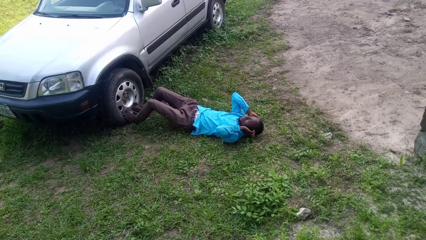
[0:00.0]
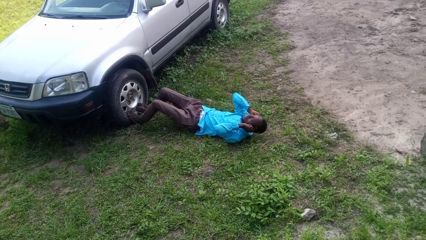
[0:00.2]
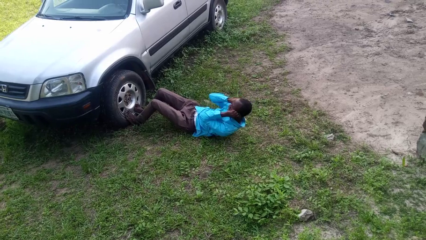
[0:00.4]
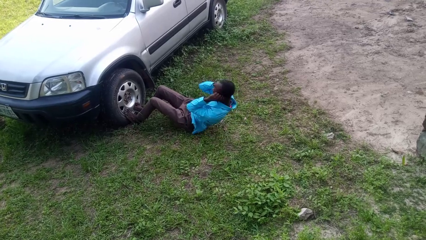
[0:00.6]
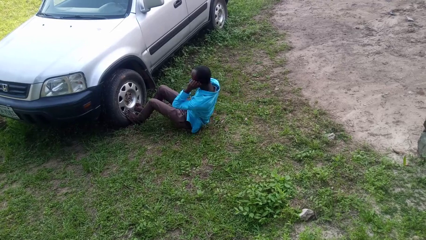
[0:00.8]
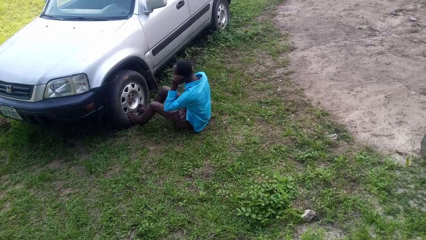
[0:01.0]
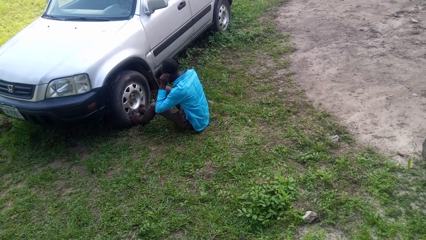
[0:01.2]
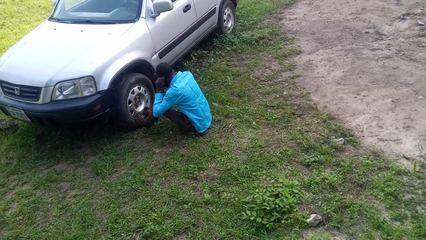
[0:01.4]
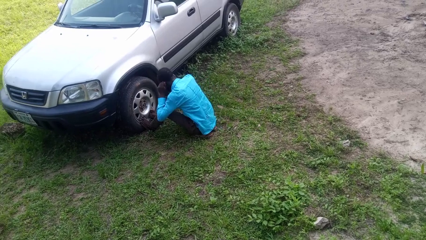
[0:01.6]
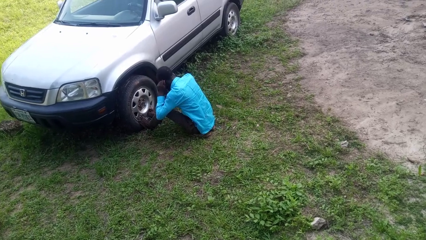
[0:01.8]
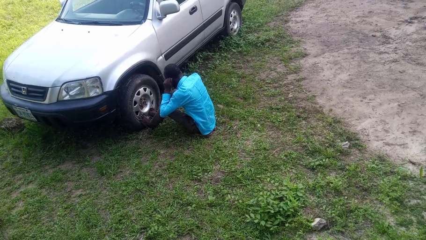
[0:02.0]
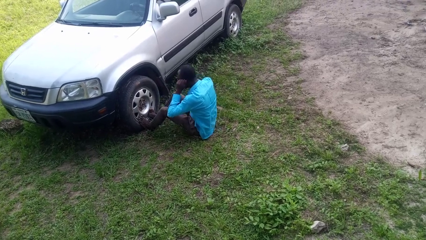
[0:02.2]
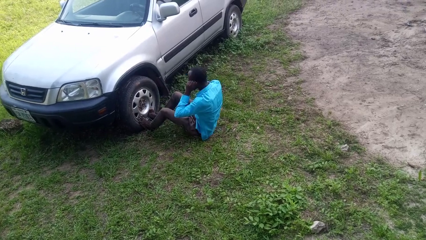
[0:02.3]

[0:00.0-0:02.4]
person exercises with situp

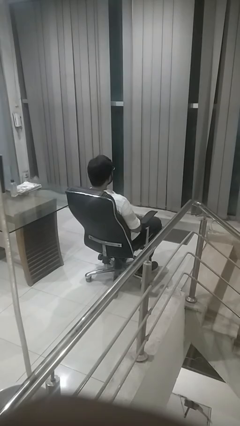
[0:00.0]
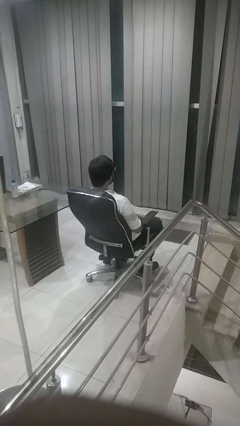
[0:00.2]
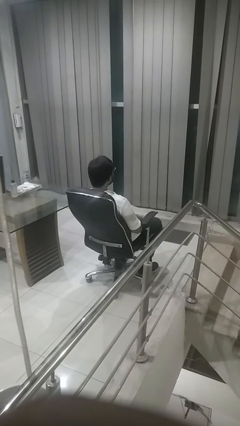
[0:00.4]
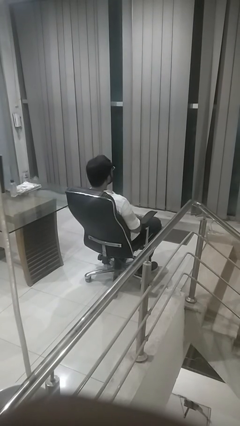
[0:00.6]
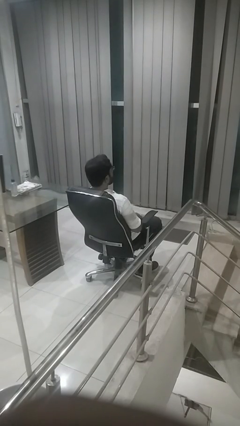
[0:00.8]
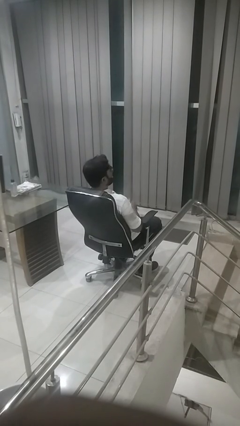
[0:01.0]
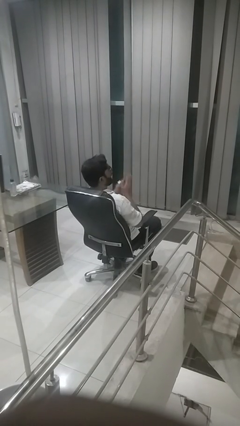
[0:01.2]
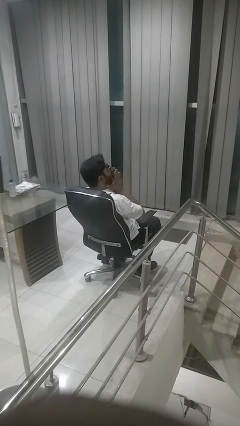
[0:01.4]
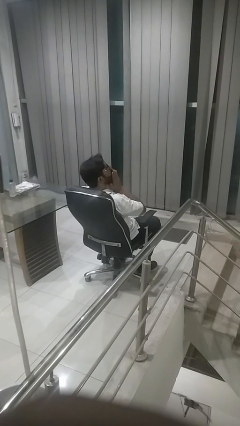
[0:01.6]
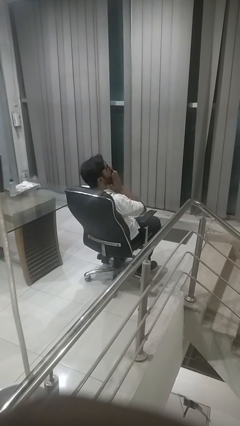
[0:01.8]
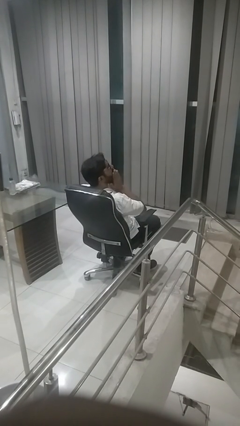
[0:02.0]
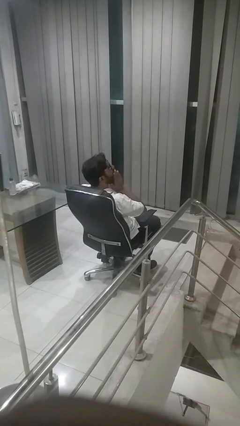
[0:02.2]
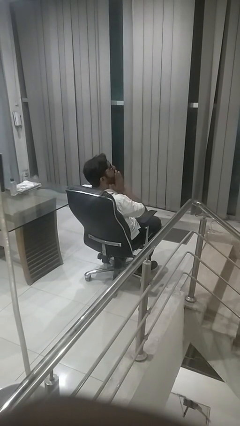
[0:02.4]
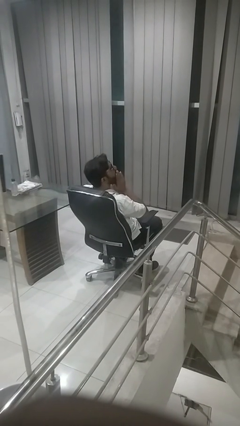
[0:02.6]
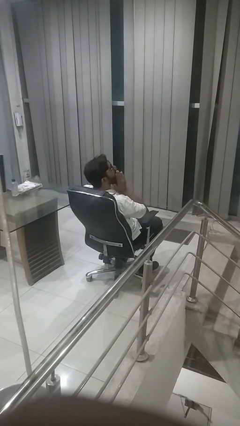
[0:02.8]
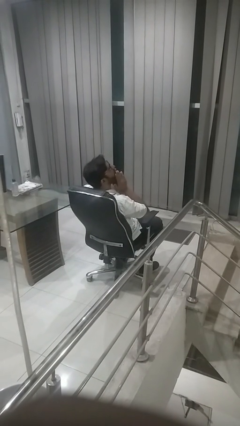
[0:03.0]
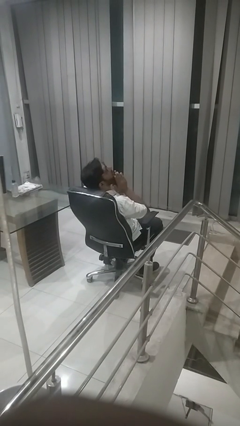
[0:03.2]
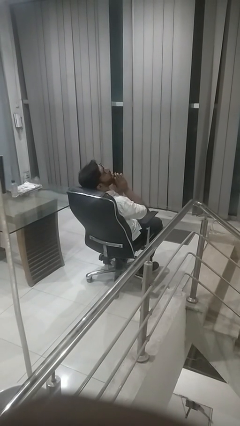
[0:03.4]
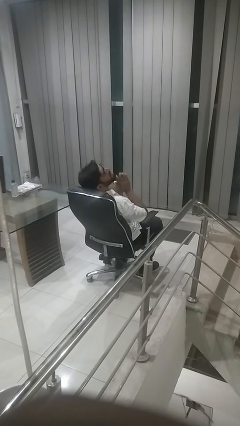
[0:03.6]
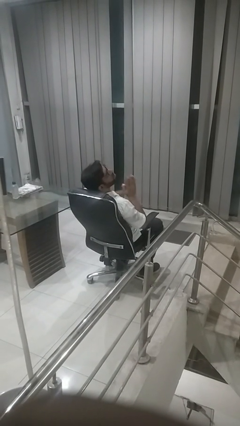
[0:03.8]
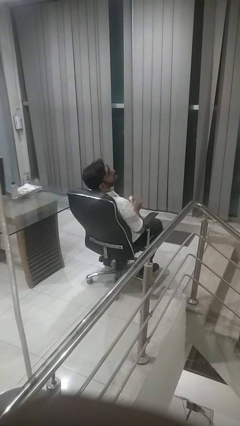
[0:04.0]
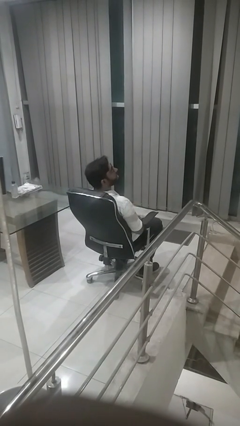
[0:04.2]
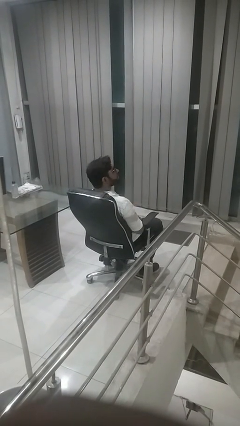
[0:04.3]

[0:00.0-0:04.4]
person yawns

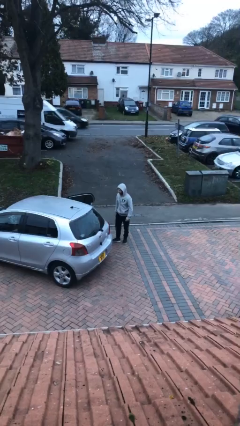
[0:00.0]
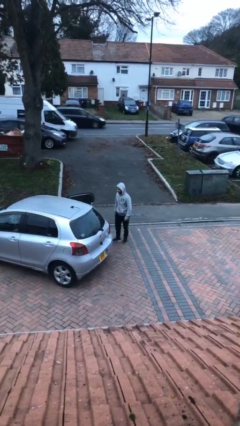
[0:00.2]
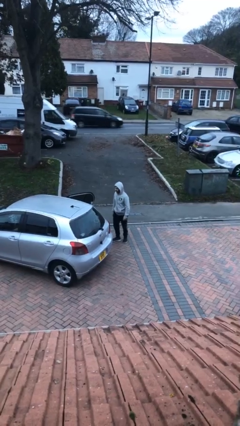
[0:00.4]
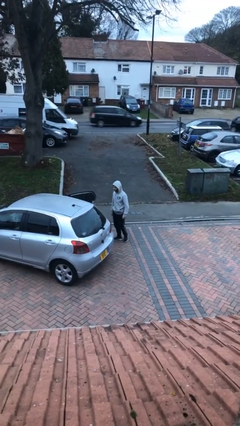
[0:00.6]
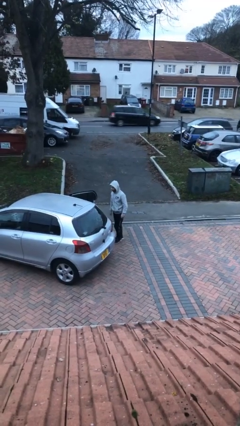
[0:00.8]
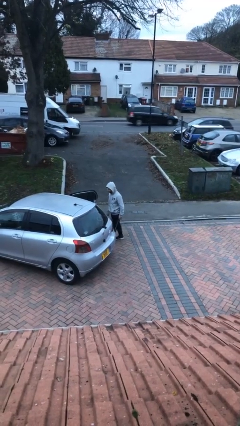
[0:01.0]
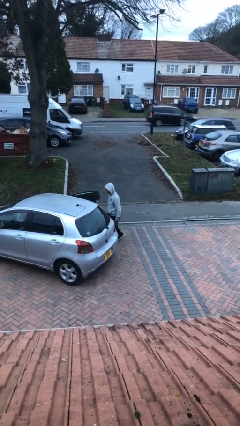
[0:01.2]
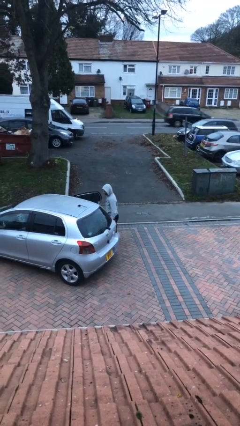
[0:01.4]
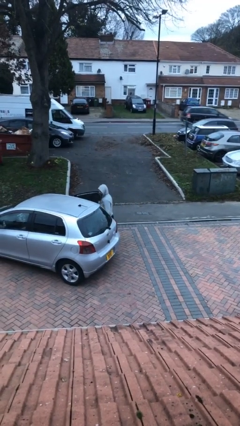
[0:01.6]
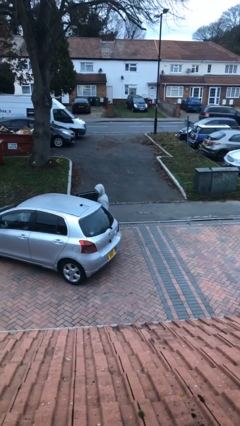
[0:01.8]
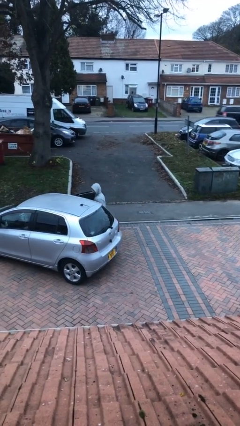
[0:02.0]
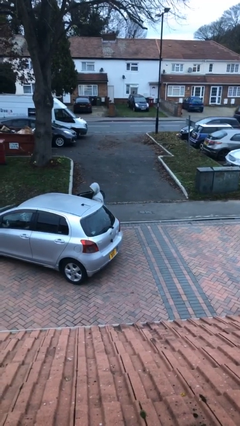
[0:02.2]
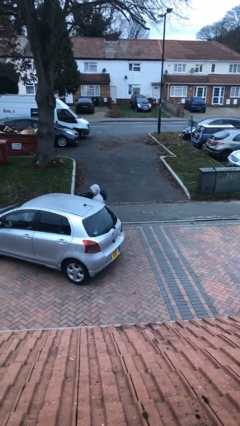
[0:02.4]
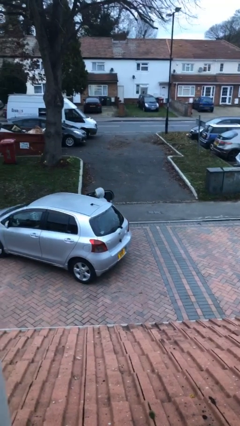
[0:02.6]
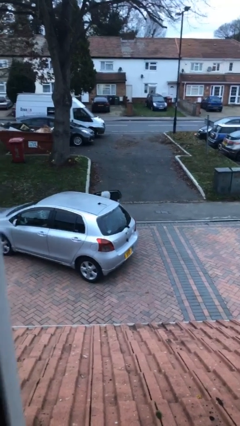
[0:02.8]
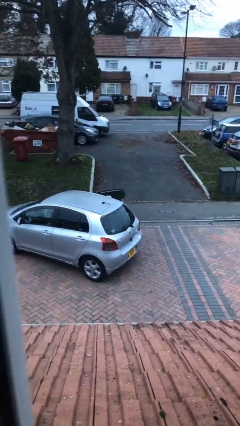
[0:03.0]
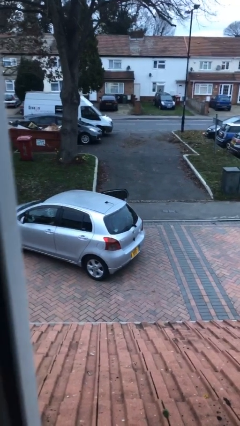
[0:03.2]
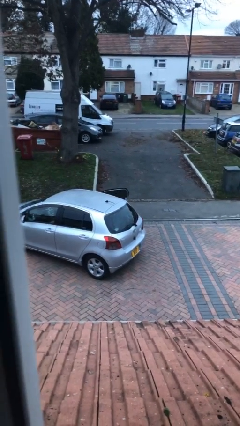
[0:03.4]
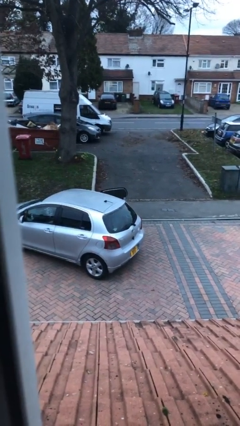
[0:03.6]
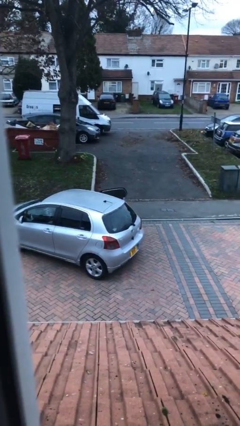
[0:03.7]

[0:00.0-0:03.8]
person enters car

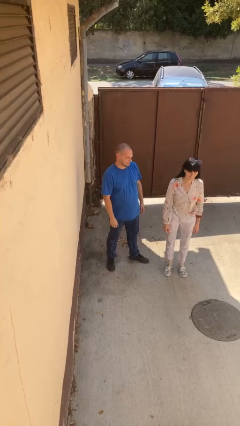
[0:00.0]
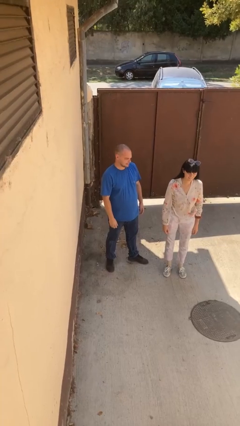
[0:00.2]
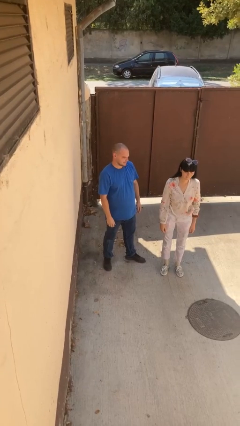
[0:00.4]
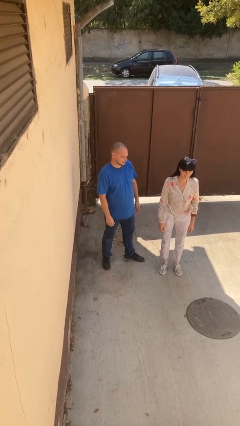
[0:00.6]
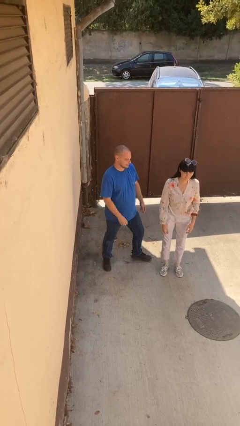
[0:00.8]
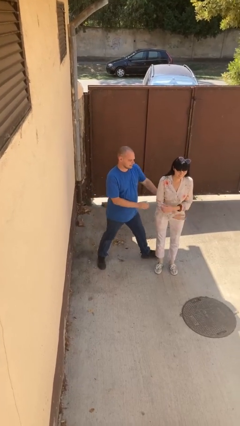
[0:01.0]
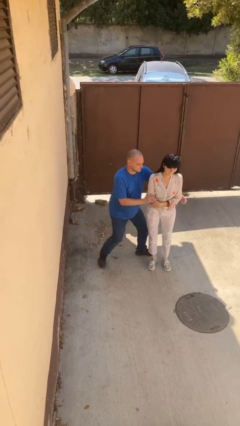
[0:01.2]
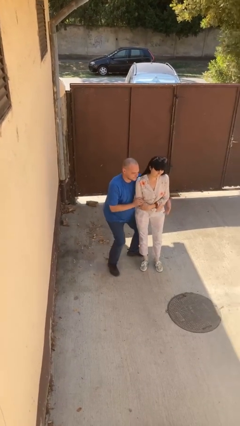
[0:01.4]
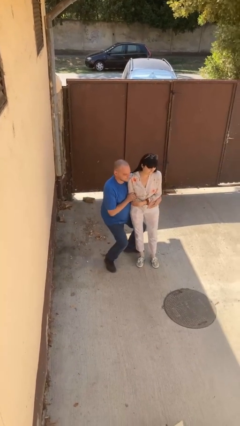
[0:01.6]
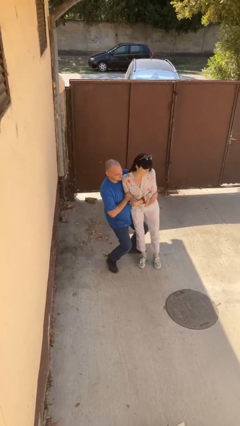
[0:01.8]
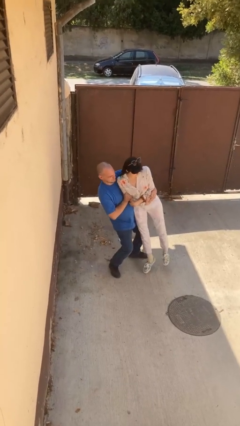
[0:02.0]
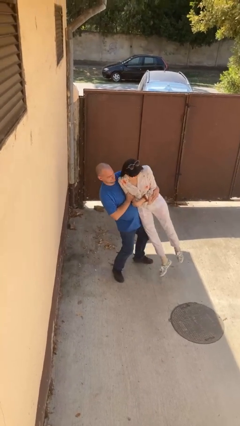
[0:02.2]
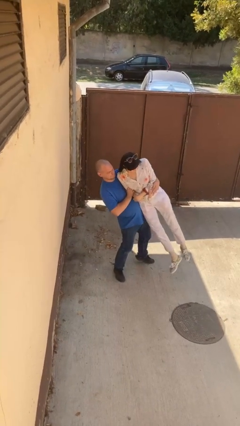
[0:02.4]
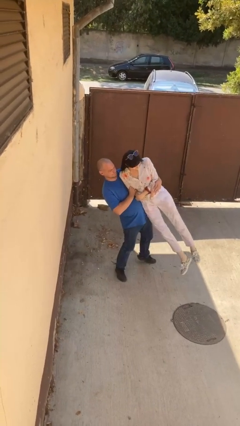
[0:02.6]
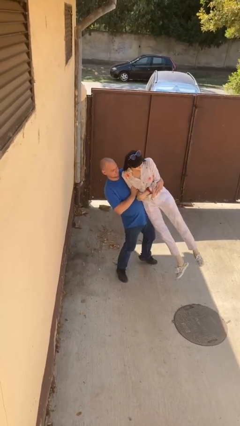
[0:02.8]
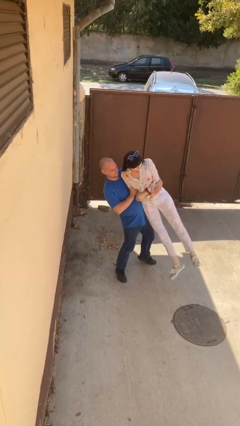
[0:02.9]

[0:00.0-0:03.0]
person picks up person

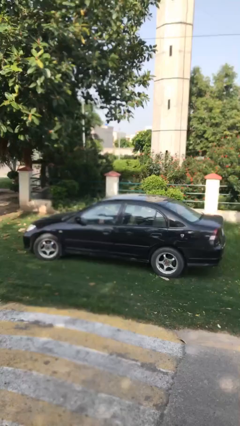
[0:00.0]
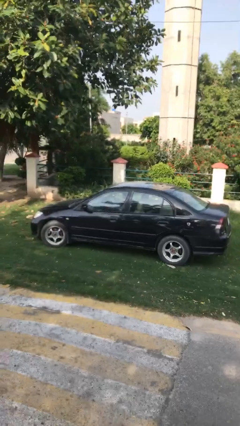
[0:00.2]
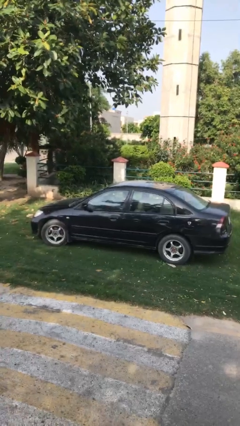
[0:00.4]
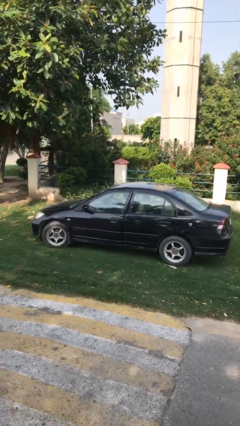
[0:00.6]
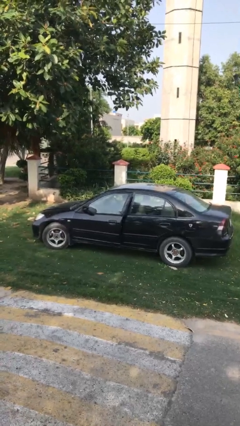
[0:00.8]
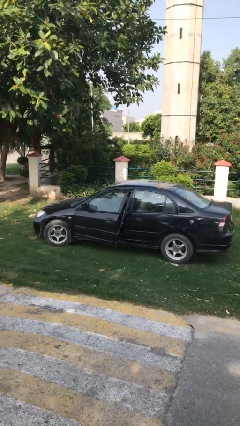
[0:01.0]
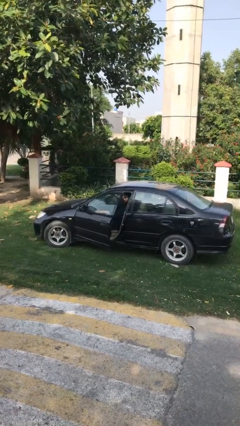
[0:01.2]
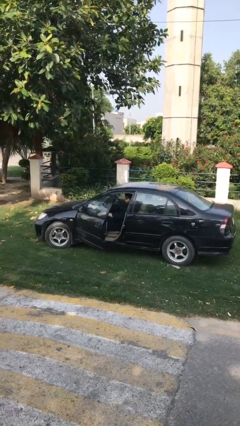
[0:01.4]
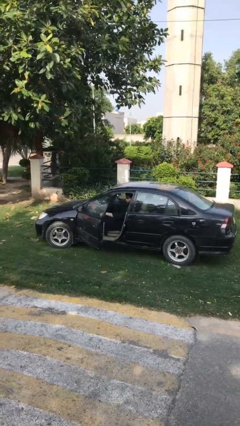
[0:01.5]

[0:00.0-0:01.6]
person opens car door

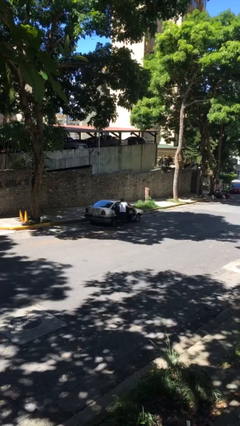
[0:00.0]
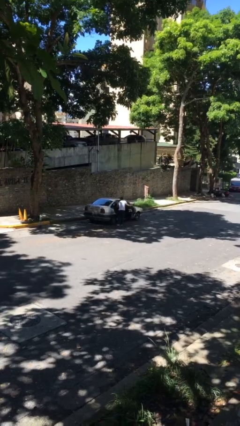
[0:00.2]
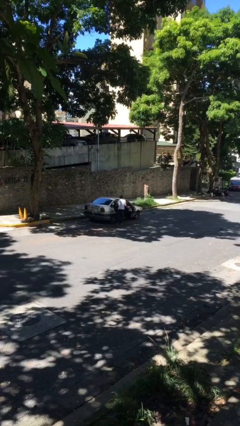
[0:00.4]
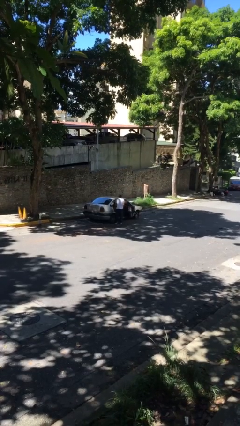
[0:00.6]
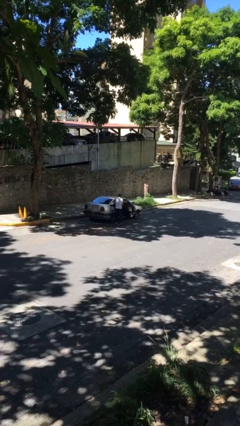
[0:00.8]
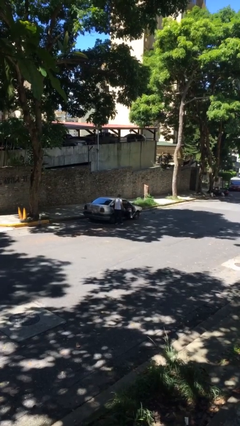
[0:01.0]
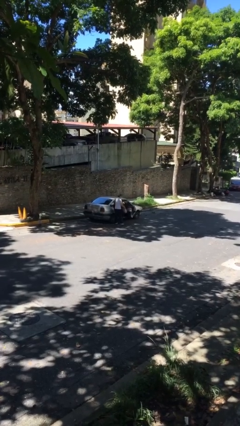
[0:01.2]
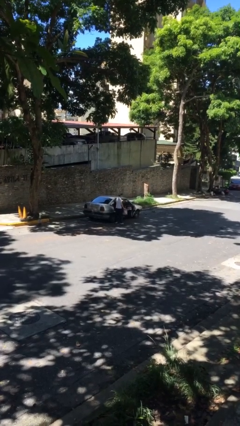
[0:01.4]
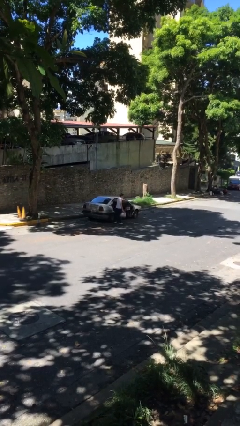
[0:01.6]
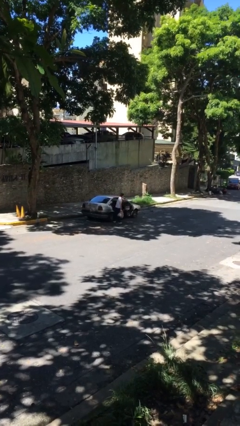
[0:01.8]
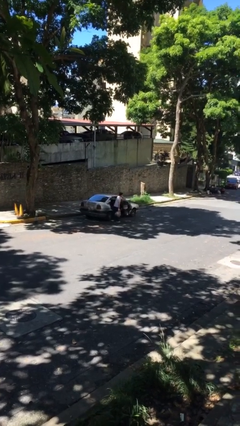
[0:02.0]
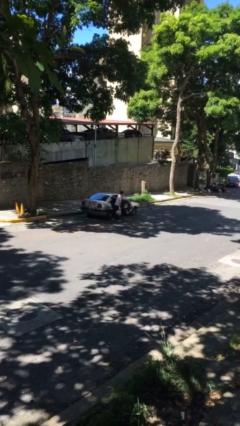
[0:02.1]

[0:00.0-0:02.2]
person unloads car
